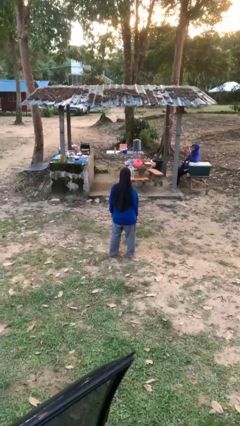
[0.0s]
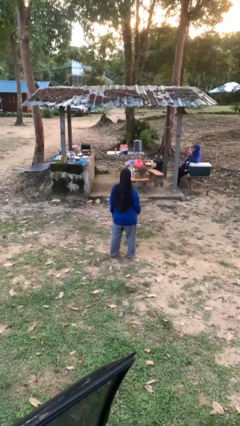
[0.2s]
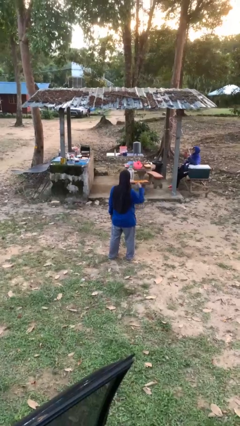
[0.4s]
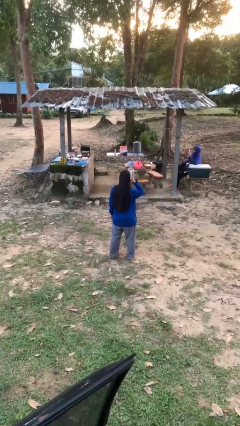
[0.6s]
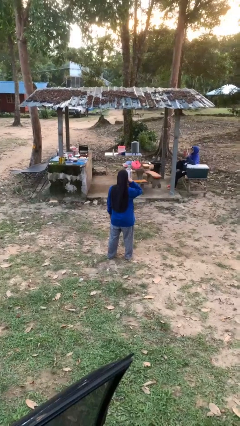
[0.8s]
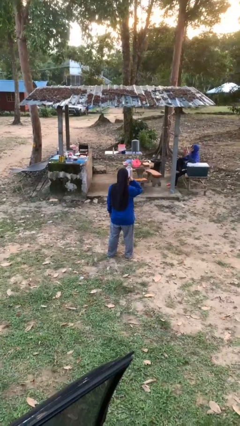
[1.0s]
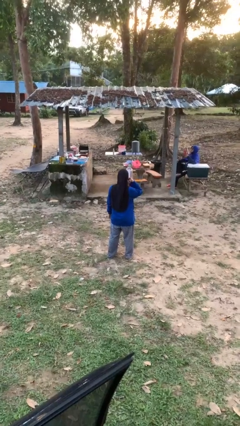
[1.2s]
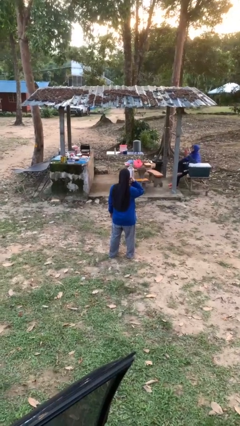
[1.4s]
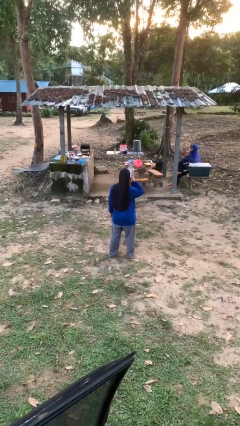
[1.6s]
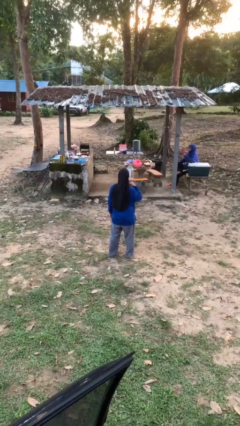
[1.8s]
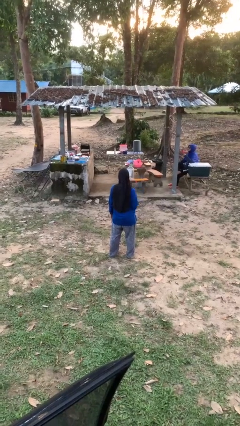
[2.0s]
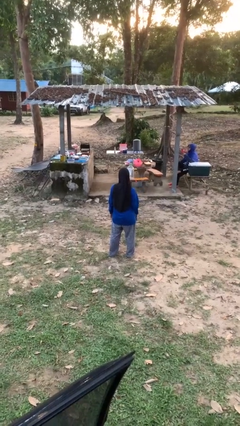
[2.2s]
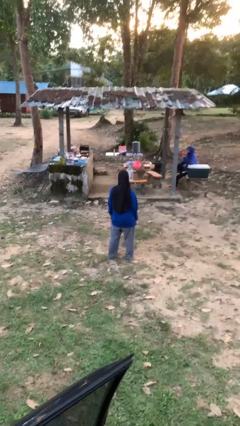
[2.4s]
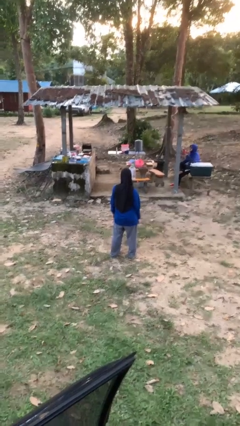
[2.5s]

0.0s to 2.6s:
person gestures call me

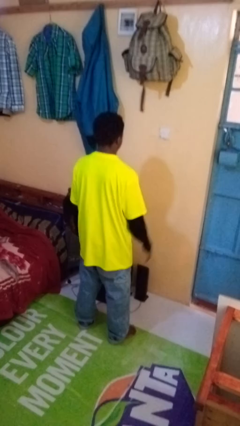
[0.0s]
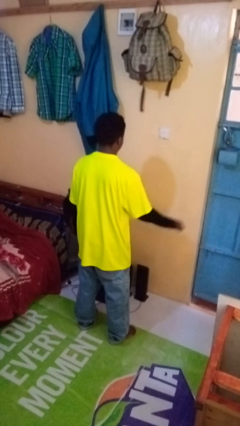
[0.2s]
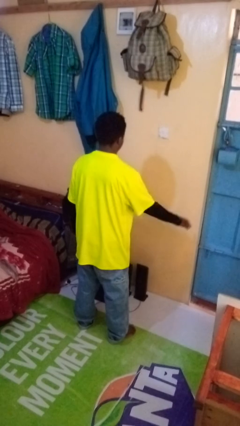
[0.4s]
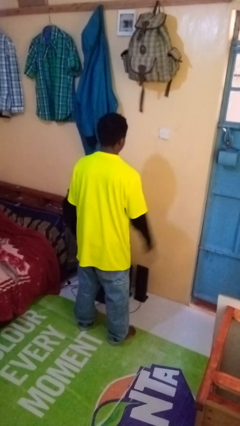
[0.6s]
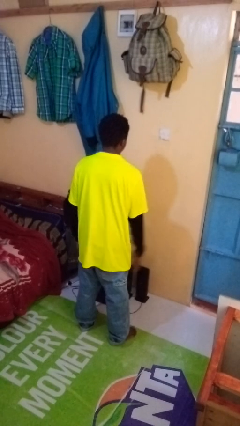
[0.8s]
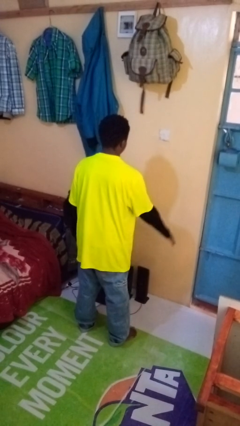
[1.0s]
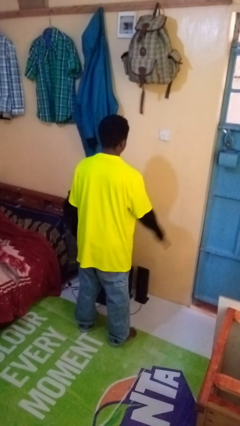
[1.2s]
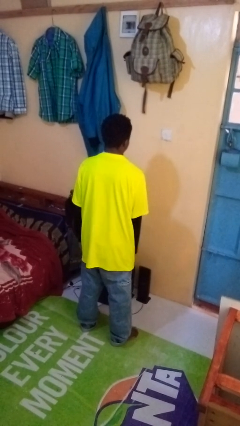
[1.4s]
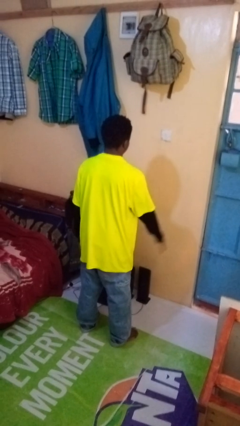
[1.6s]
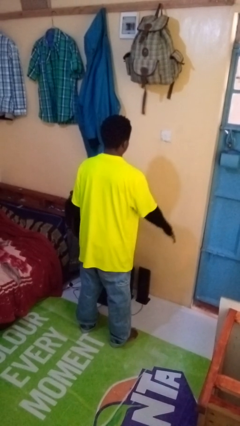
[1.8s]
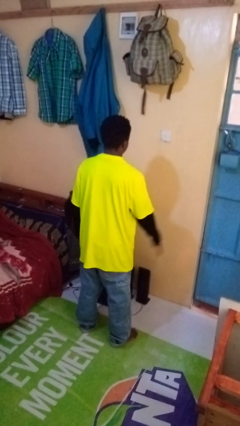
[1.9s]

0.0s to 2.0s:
person slaps hands on thighs

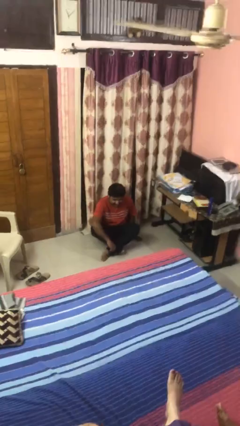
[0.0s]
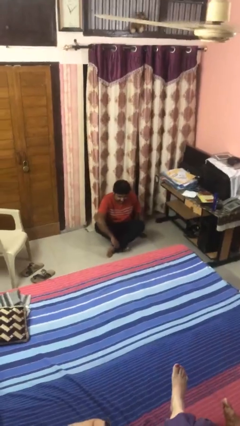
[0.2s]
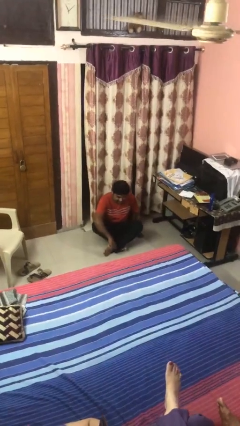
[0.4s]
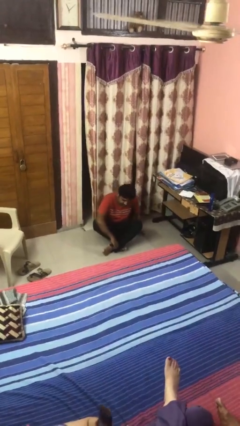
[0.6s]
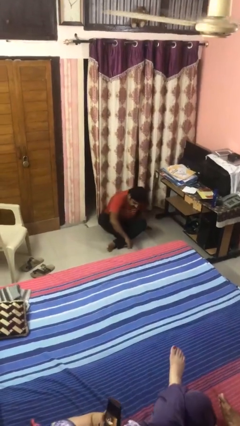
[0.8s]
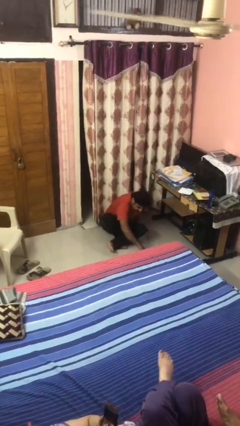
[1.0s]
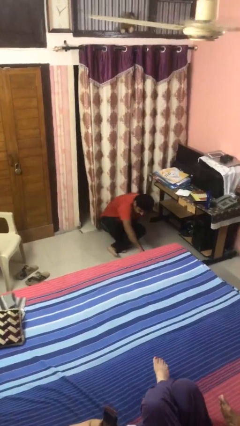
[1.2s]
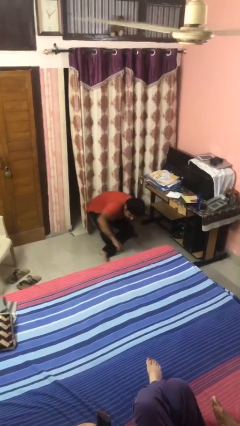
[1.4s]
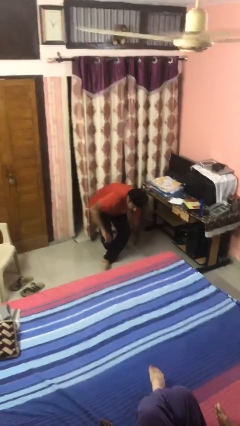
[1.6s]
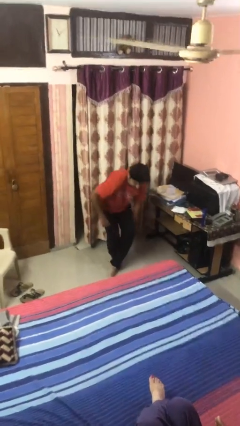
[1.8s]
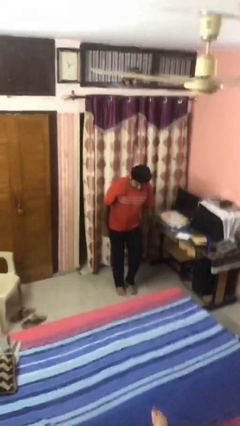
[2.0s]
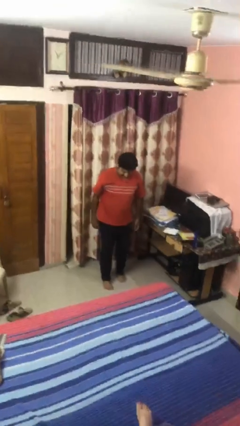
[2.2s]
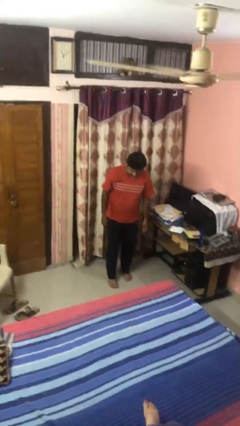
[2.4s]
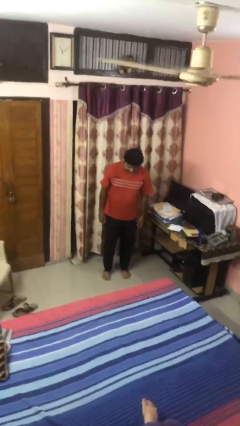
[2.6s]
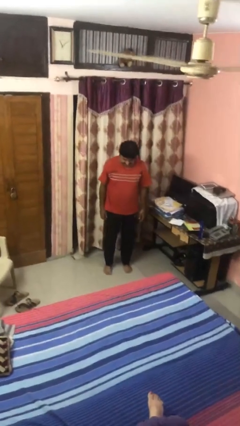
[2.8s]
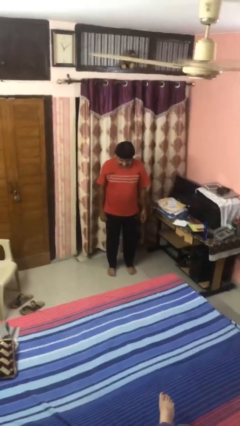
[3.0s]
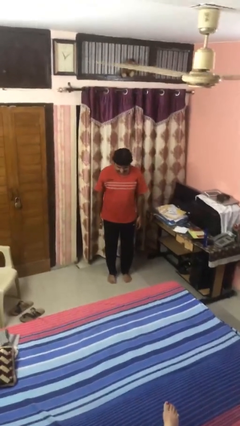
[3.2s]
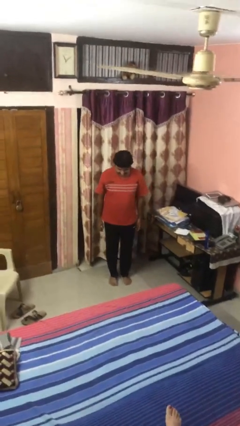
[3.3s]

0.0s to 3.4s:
person stands up from floor

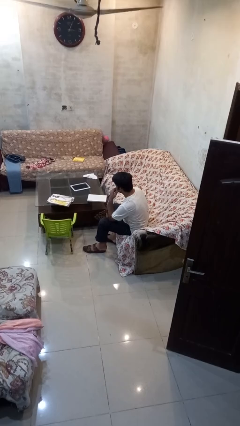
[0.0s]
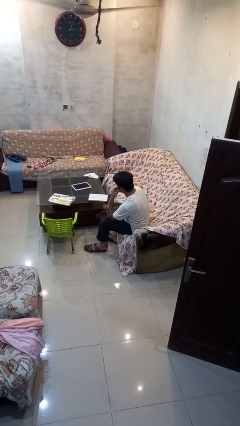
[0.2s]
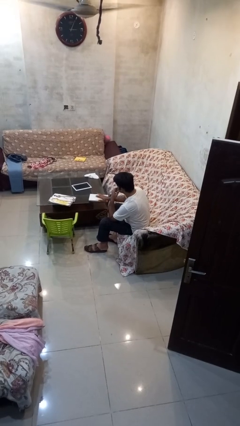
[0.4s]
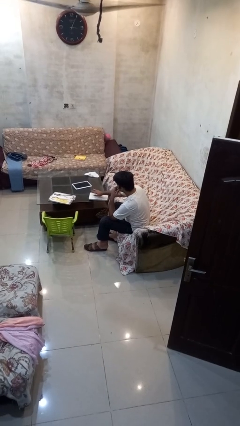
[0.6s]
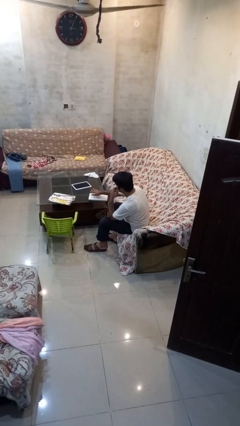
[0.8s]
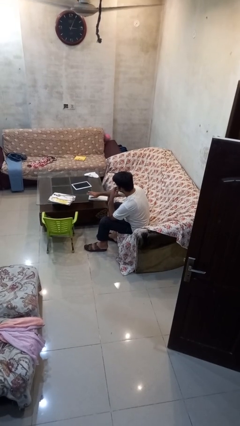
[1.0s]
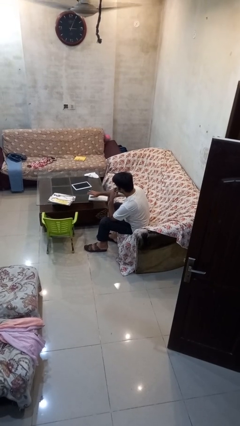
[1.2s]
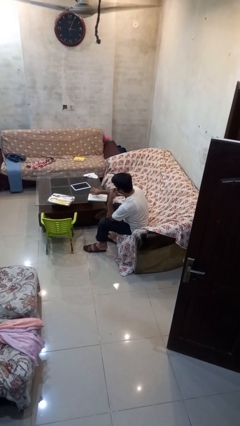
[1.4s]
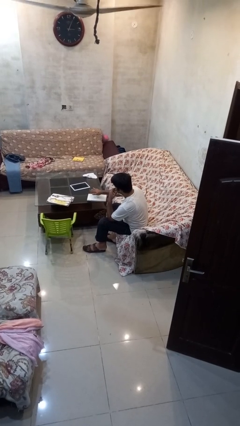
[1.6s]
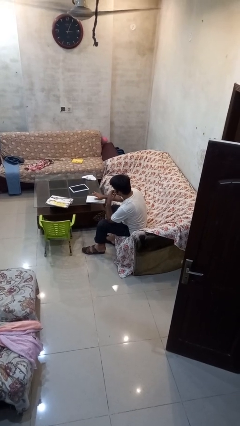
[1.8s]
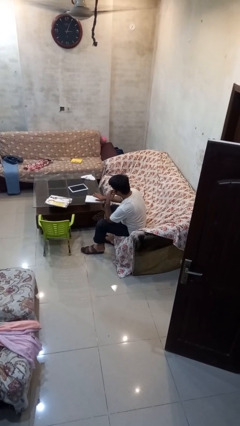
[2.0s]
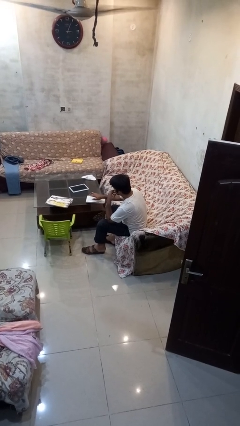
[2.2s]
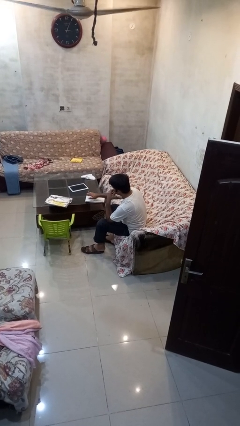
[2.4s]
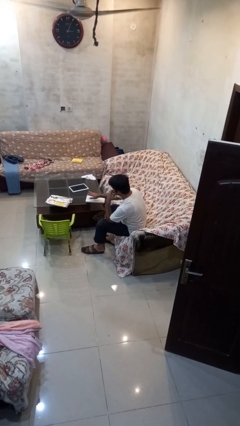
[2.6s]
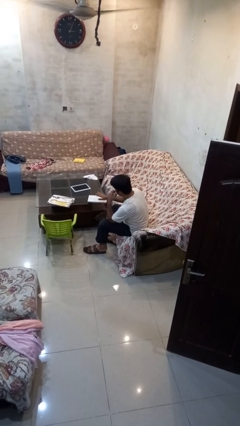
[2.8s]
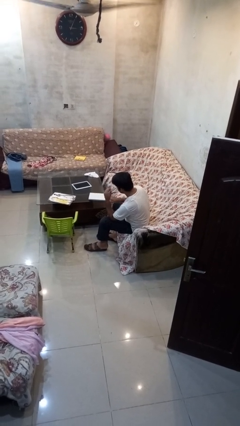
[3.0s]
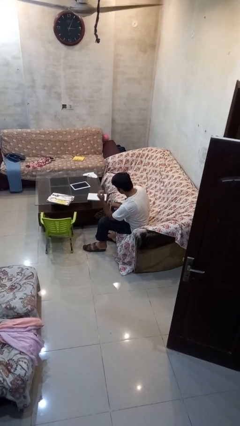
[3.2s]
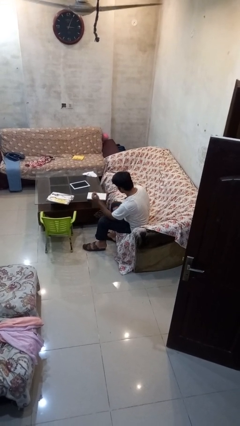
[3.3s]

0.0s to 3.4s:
person waves hand over object

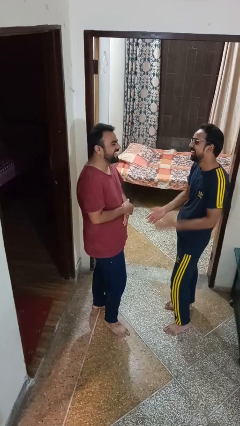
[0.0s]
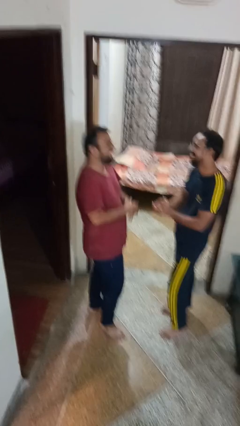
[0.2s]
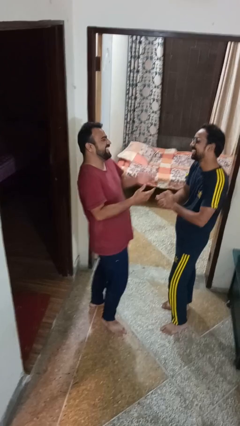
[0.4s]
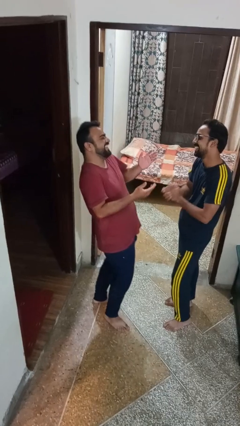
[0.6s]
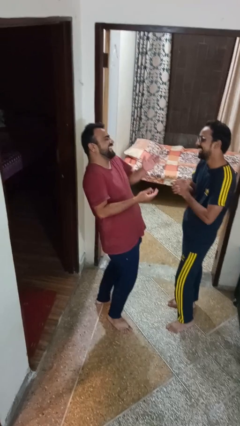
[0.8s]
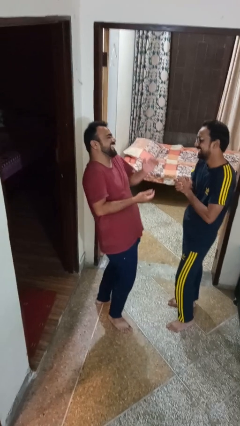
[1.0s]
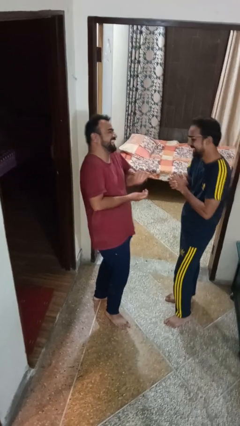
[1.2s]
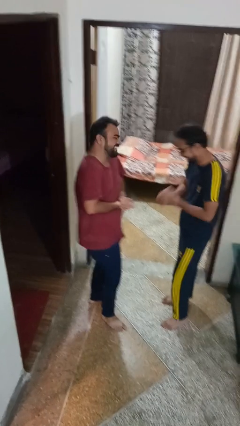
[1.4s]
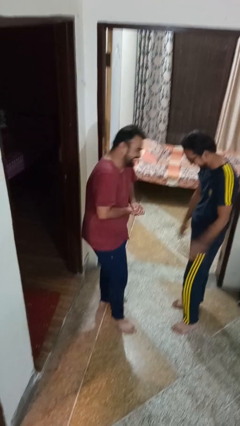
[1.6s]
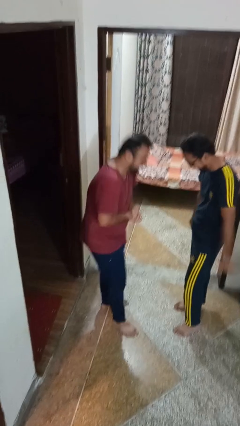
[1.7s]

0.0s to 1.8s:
person laughs with person

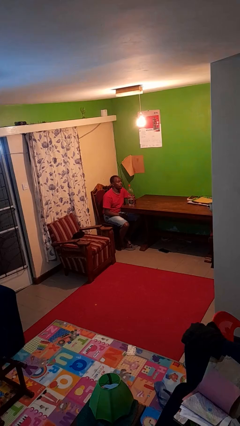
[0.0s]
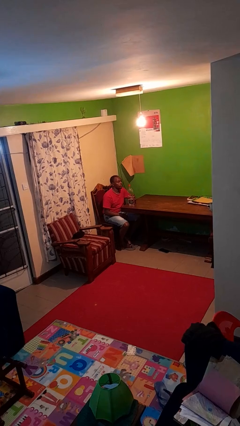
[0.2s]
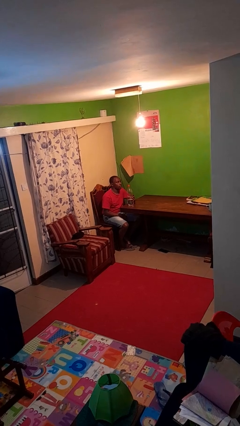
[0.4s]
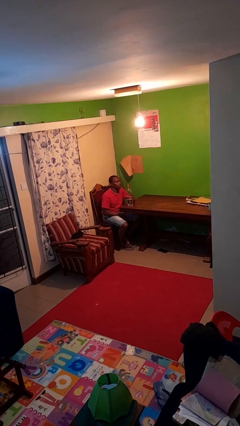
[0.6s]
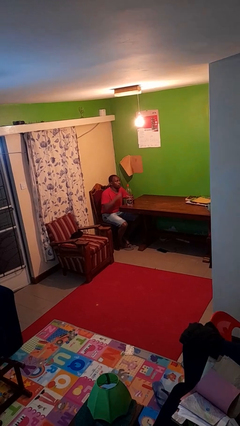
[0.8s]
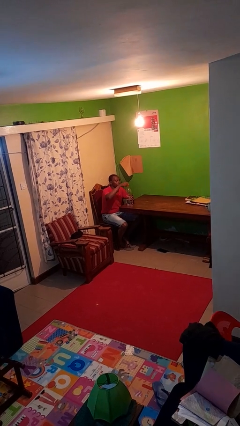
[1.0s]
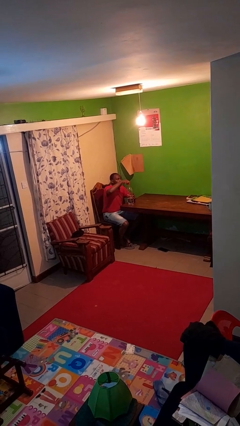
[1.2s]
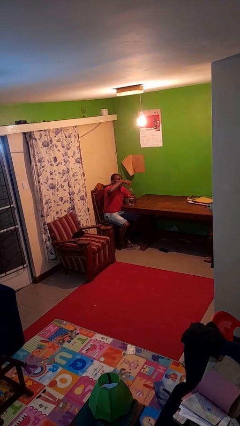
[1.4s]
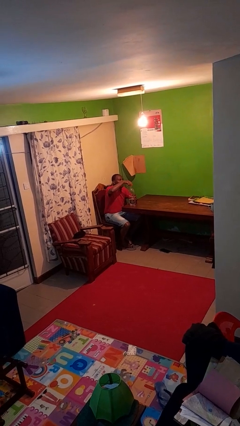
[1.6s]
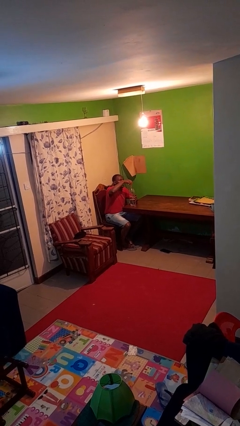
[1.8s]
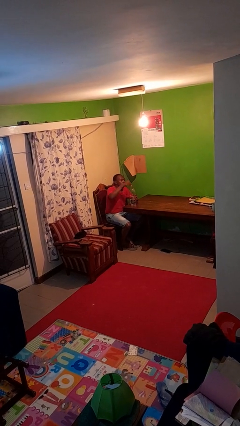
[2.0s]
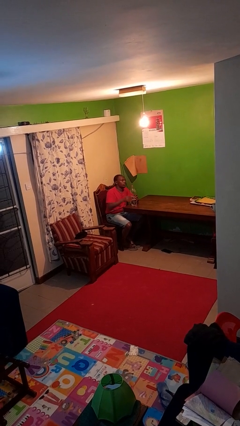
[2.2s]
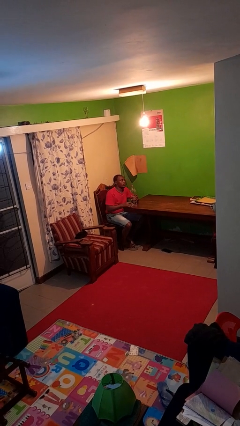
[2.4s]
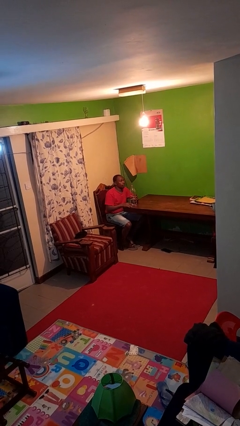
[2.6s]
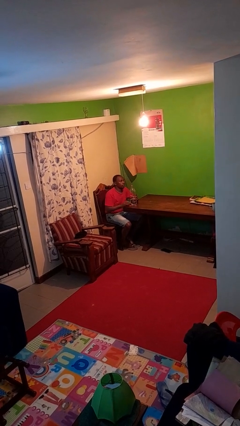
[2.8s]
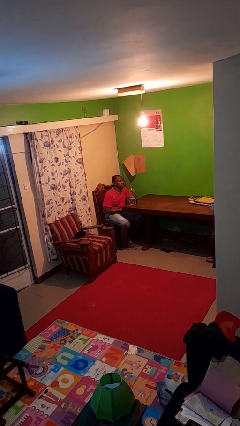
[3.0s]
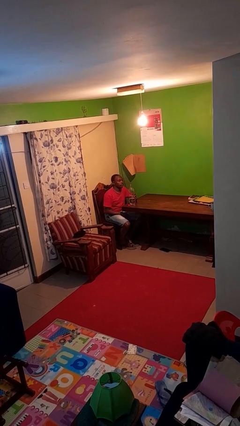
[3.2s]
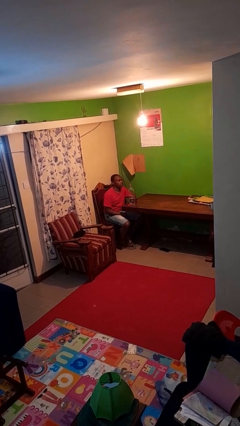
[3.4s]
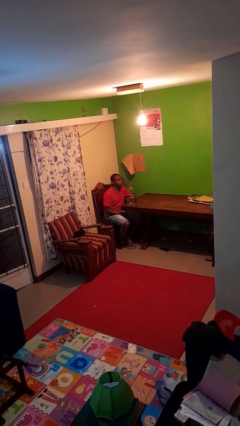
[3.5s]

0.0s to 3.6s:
person unscrews lid from bottle

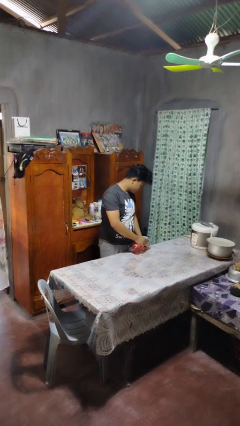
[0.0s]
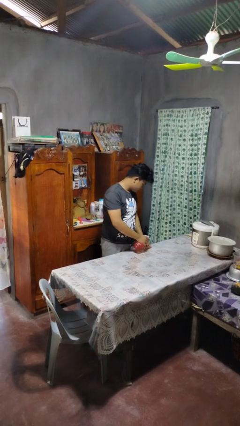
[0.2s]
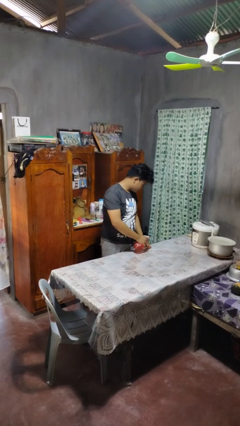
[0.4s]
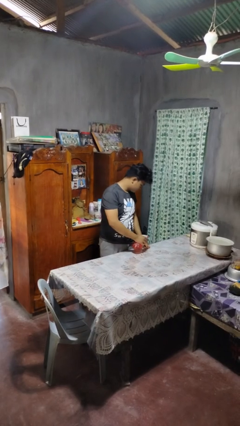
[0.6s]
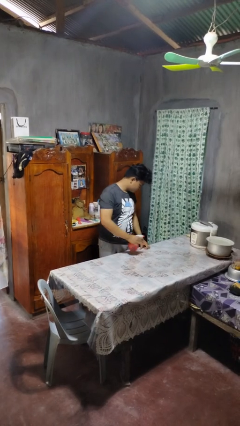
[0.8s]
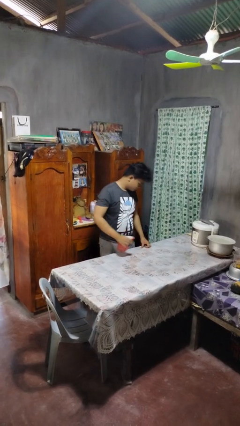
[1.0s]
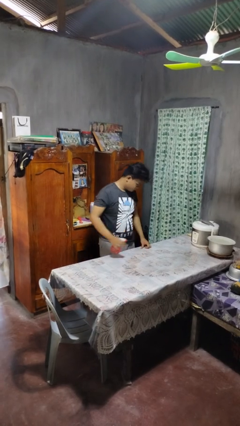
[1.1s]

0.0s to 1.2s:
person sprays from bottle
